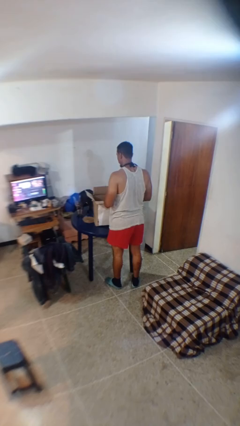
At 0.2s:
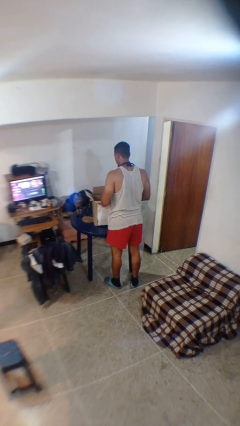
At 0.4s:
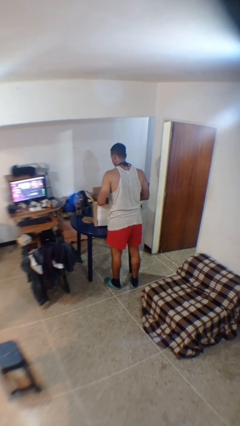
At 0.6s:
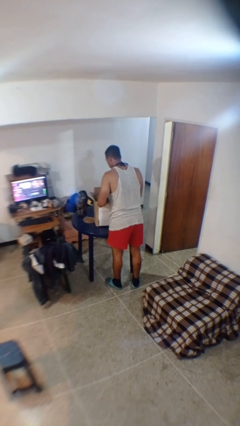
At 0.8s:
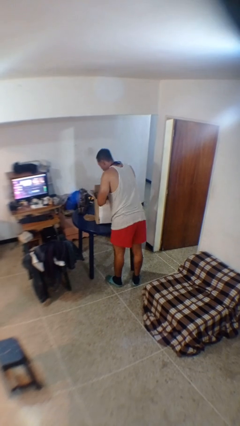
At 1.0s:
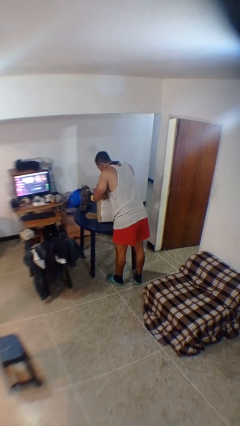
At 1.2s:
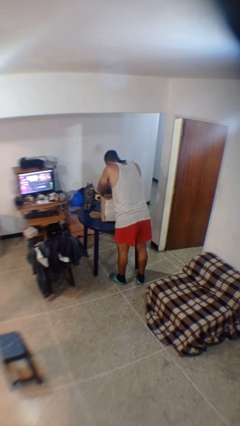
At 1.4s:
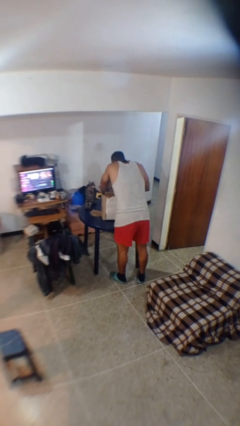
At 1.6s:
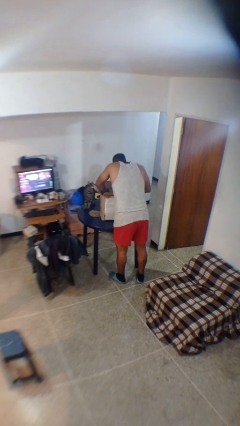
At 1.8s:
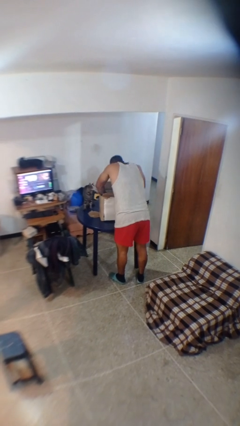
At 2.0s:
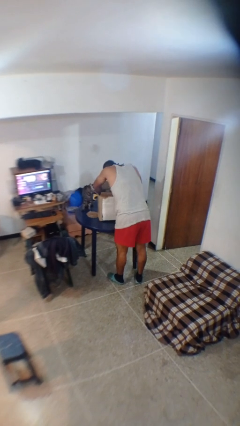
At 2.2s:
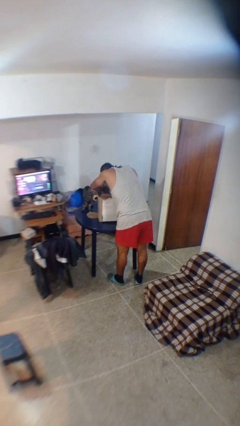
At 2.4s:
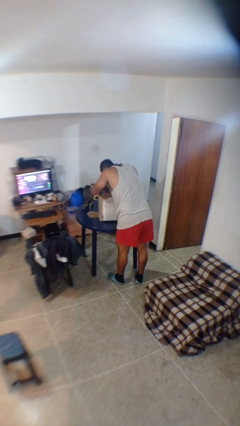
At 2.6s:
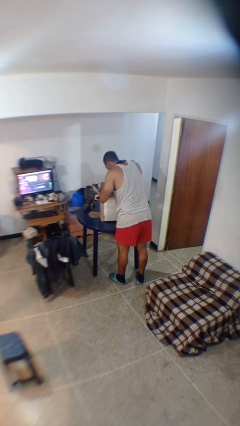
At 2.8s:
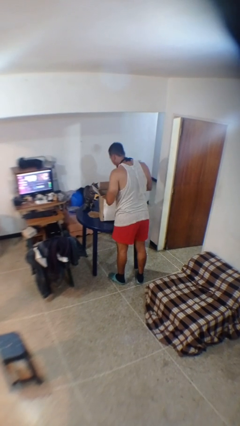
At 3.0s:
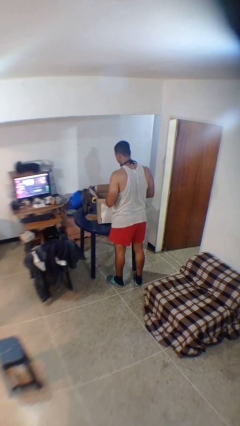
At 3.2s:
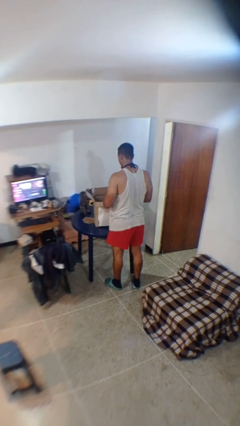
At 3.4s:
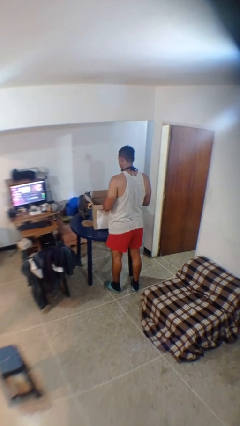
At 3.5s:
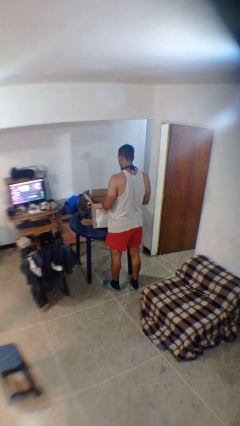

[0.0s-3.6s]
person searches in box

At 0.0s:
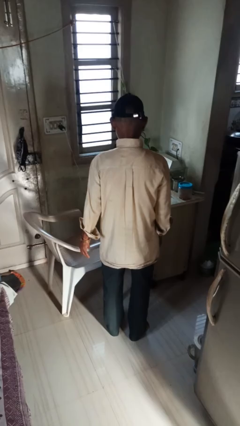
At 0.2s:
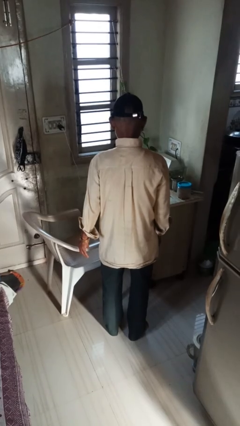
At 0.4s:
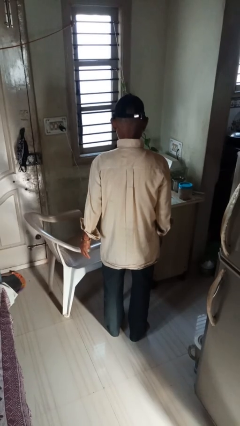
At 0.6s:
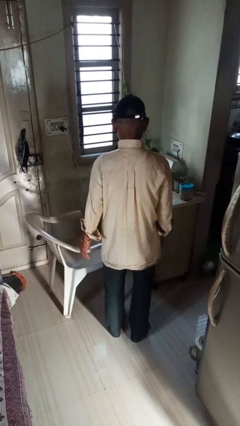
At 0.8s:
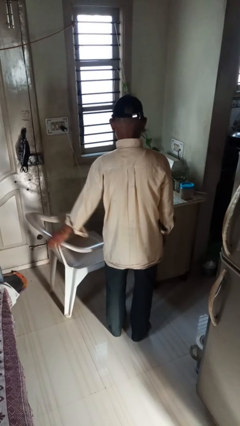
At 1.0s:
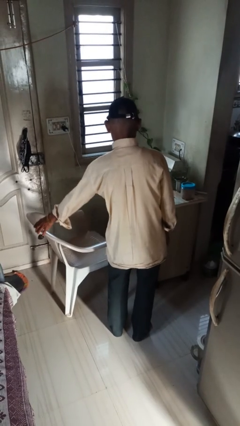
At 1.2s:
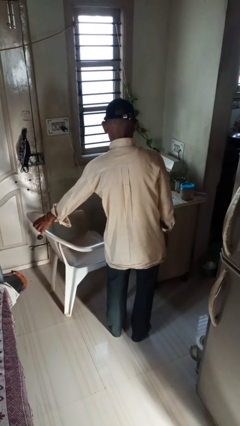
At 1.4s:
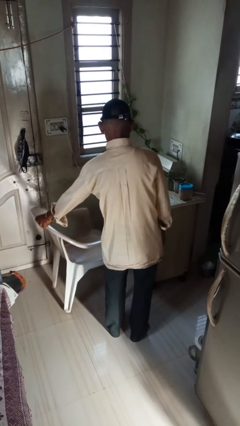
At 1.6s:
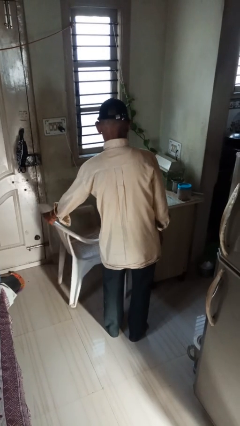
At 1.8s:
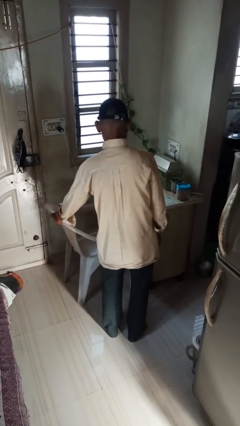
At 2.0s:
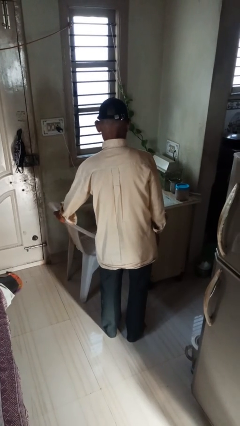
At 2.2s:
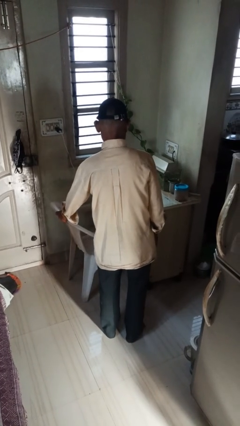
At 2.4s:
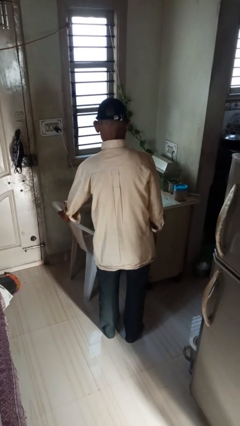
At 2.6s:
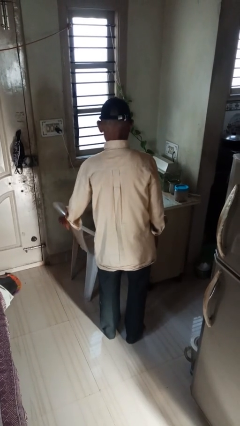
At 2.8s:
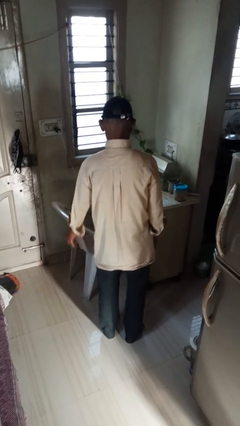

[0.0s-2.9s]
person pushes in chair

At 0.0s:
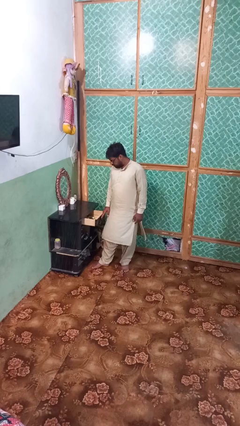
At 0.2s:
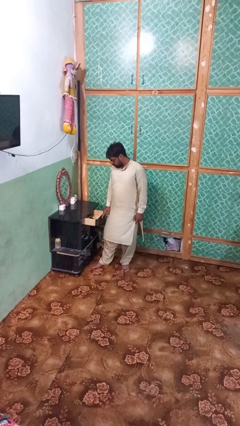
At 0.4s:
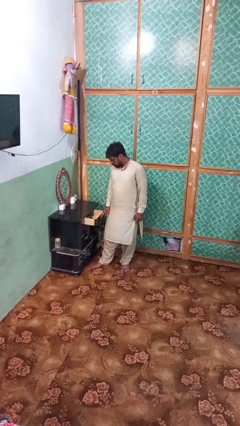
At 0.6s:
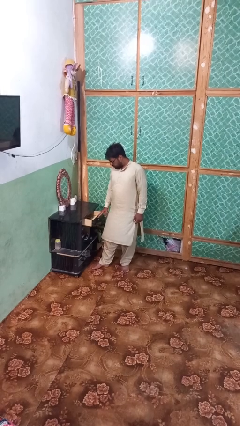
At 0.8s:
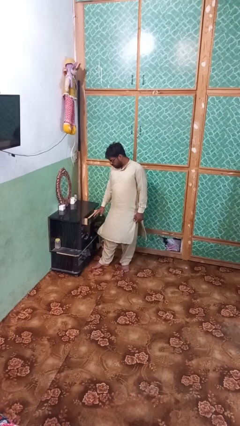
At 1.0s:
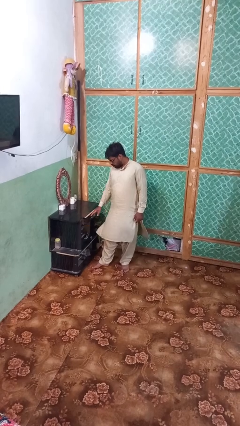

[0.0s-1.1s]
person closes dresser drawer

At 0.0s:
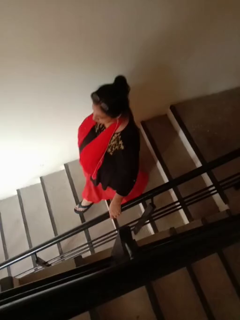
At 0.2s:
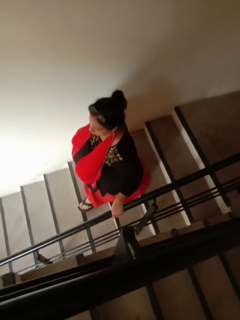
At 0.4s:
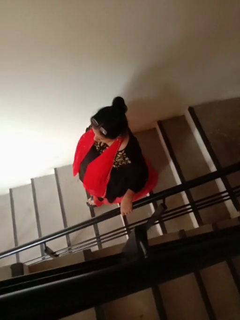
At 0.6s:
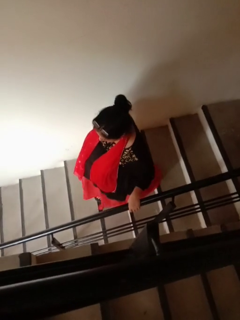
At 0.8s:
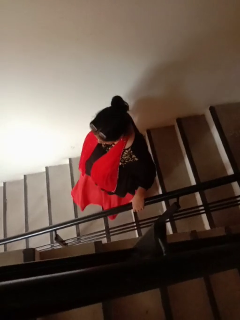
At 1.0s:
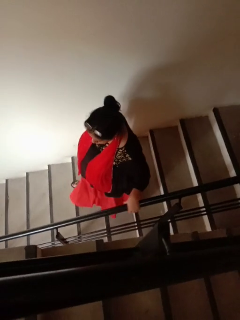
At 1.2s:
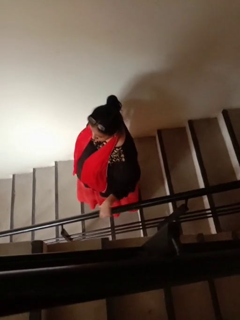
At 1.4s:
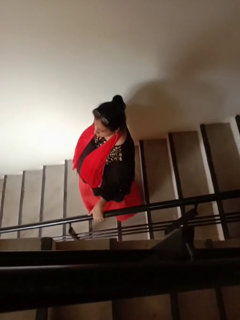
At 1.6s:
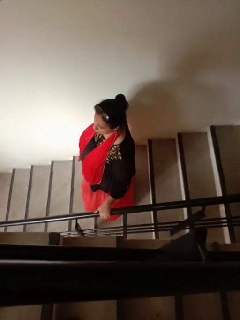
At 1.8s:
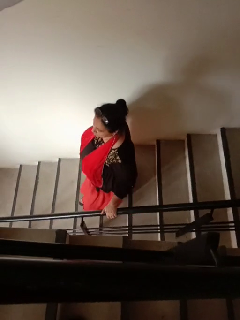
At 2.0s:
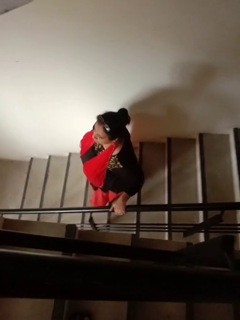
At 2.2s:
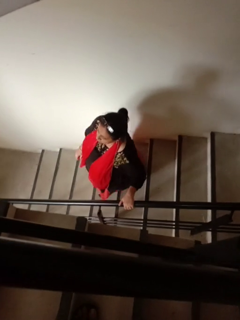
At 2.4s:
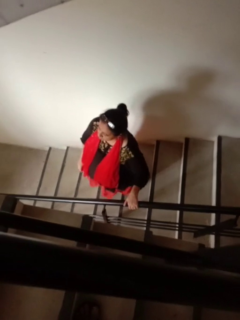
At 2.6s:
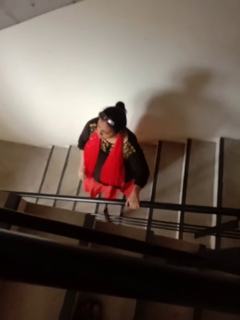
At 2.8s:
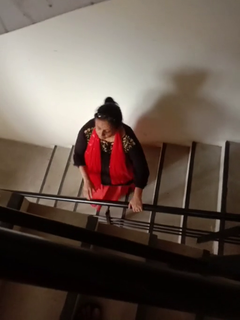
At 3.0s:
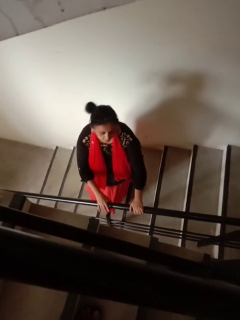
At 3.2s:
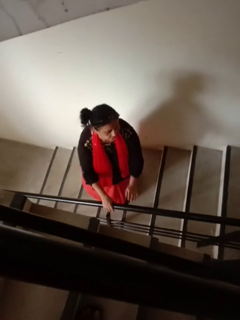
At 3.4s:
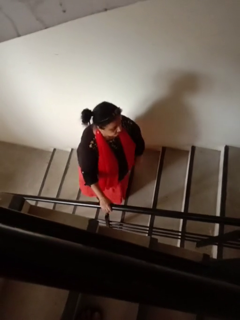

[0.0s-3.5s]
person climbs down stairs

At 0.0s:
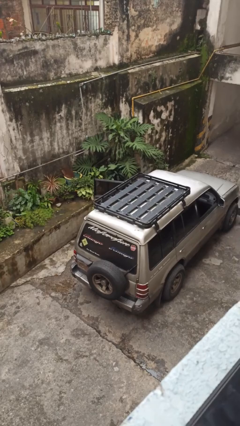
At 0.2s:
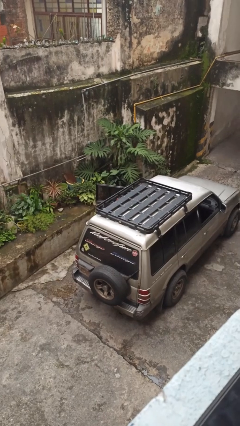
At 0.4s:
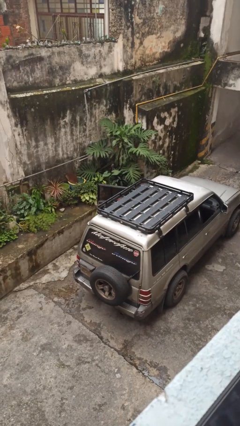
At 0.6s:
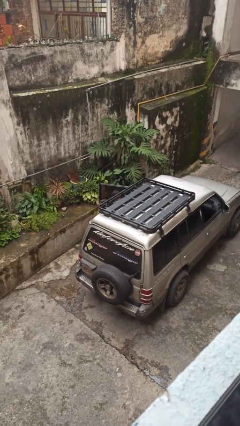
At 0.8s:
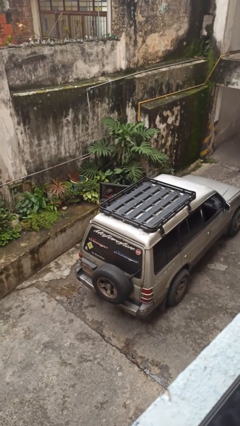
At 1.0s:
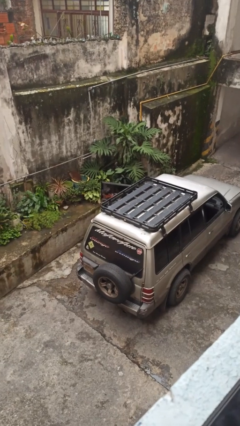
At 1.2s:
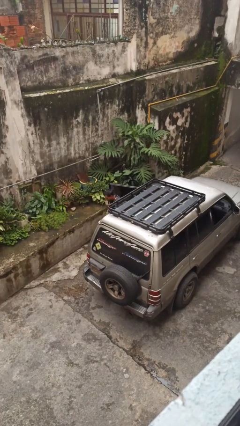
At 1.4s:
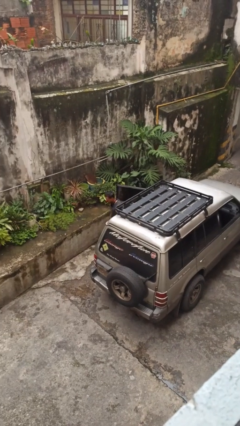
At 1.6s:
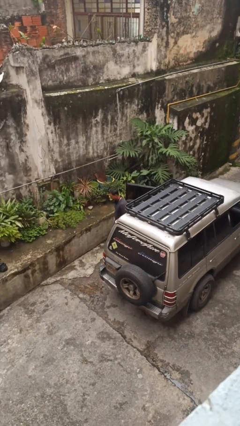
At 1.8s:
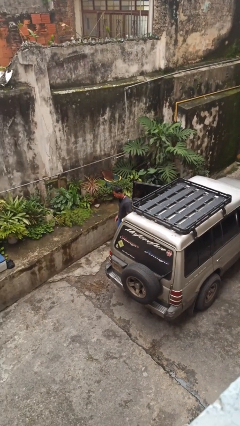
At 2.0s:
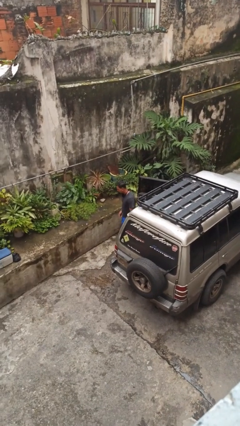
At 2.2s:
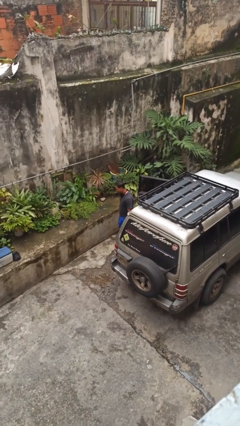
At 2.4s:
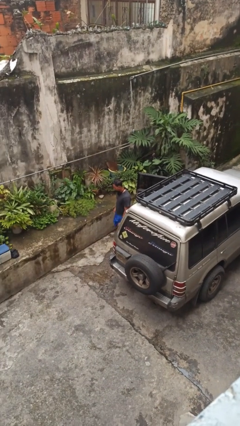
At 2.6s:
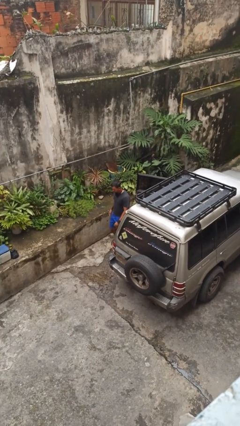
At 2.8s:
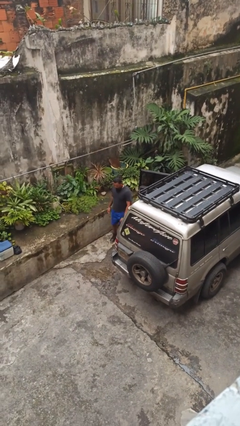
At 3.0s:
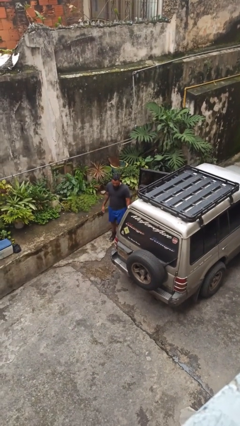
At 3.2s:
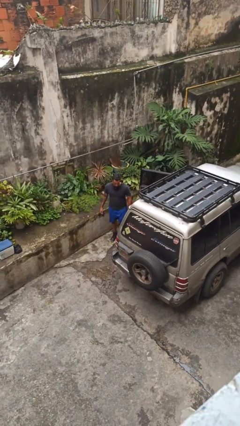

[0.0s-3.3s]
person exits car

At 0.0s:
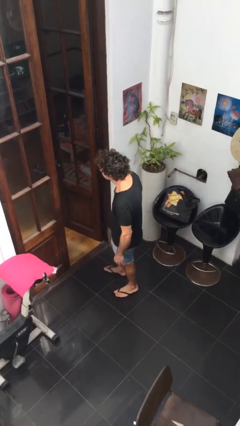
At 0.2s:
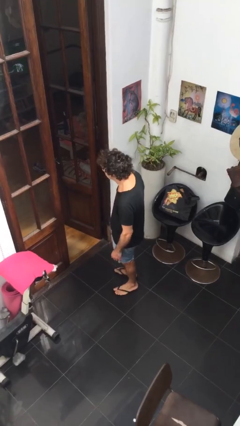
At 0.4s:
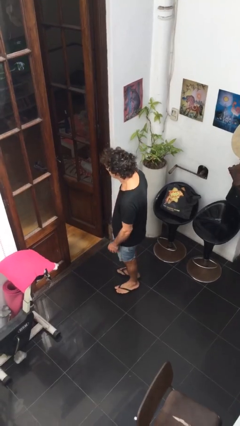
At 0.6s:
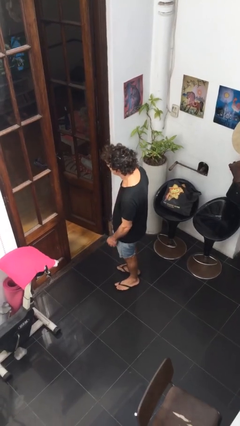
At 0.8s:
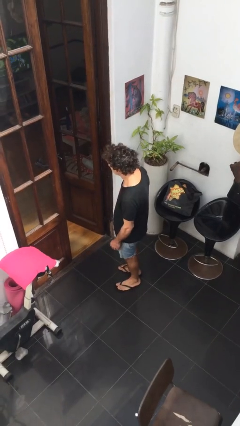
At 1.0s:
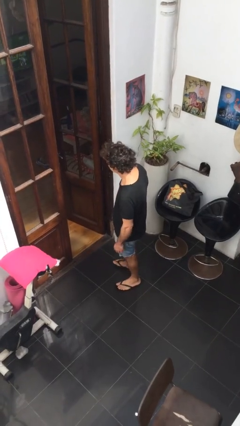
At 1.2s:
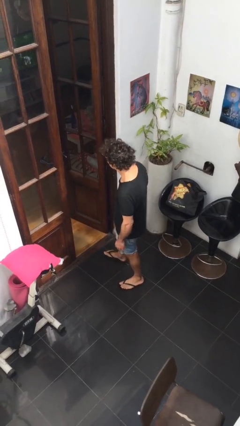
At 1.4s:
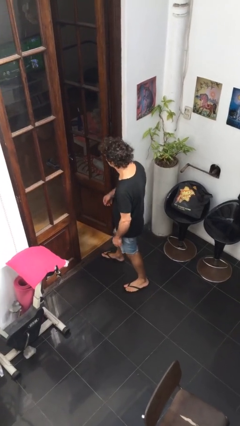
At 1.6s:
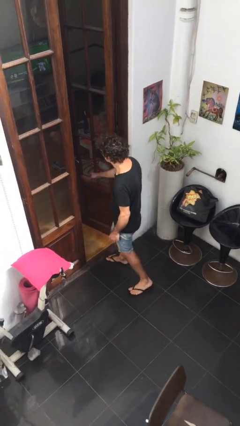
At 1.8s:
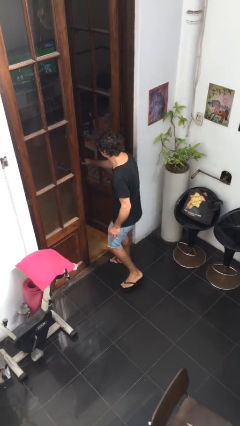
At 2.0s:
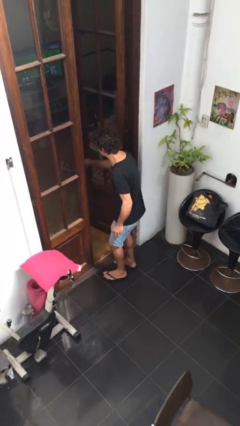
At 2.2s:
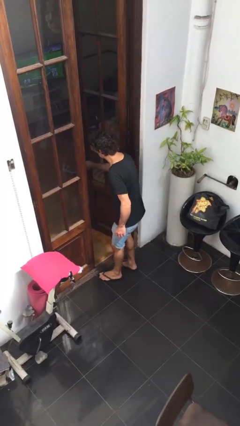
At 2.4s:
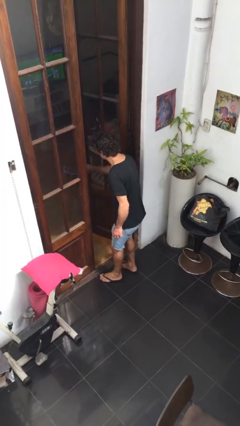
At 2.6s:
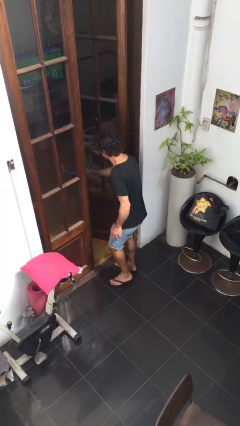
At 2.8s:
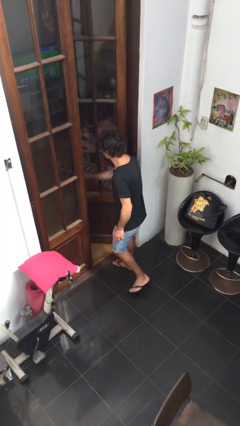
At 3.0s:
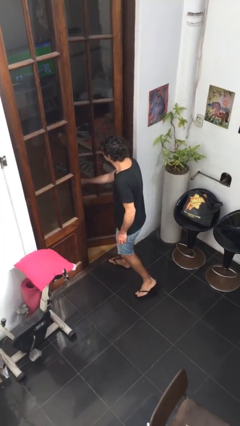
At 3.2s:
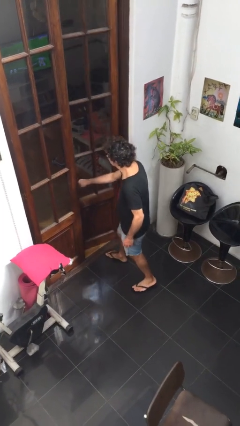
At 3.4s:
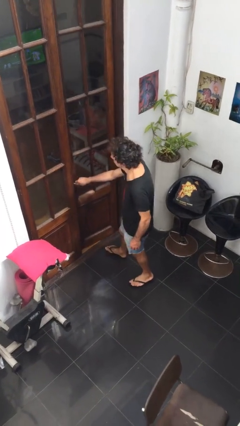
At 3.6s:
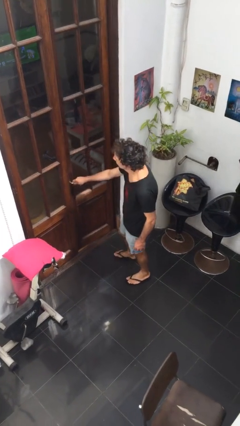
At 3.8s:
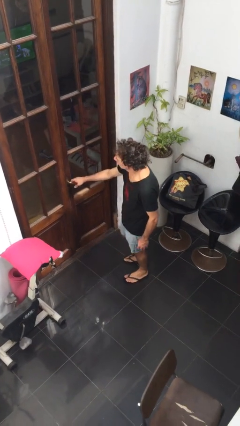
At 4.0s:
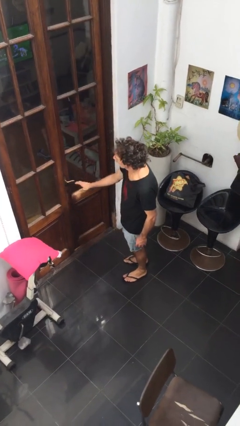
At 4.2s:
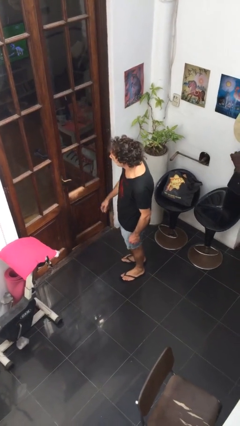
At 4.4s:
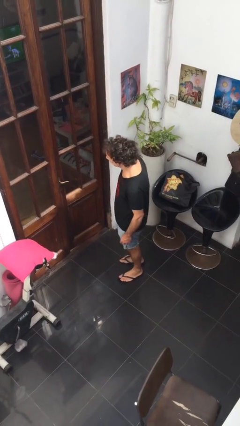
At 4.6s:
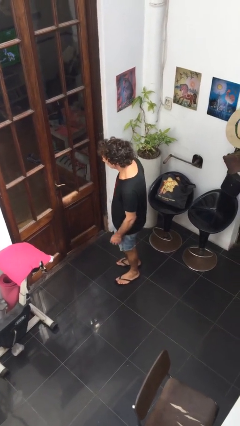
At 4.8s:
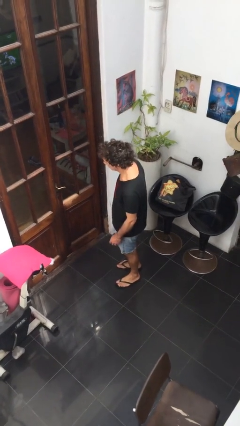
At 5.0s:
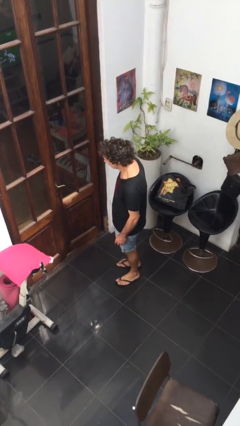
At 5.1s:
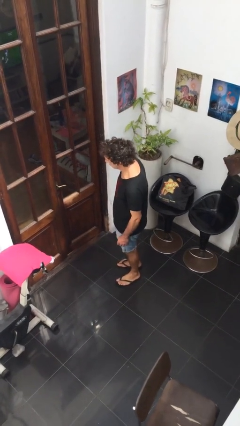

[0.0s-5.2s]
person closes facility door
